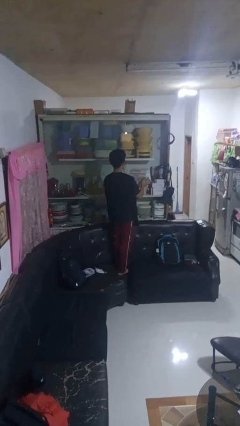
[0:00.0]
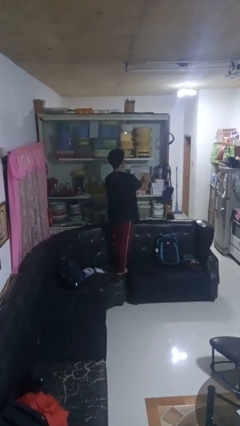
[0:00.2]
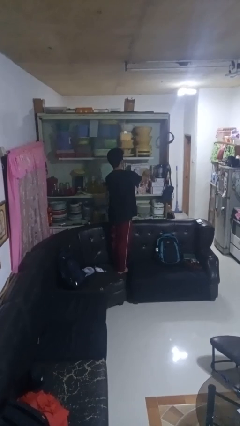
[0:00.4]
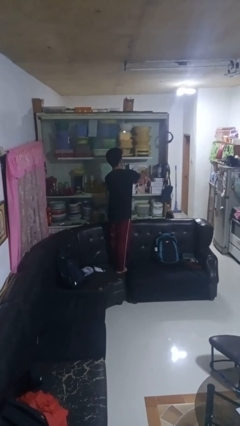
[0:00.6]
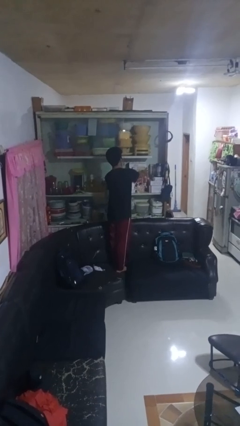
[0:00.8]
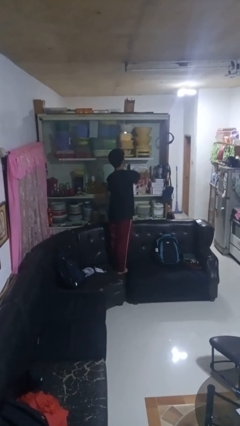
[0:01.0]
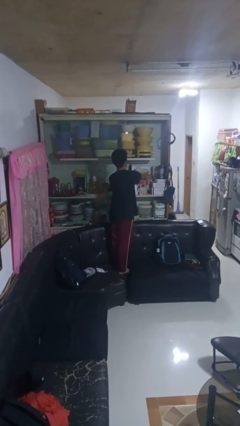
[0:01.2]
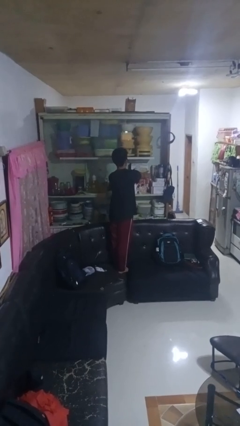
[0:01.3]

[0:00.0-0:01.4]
person puts down object into cabinet

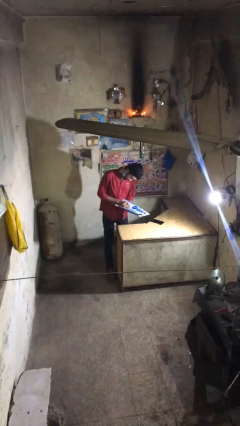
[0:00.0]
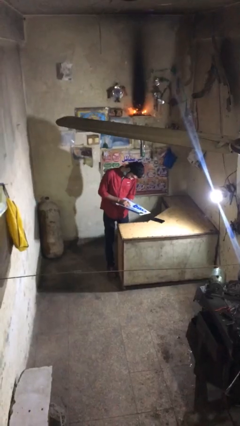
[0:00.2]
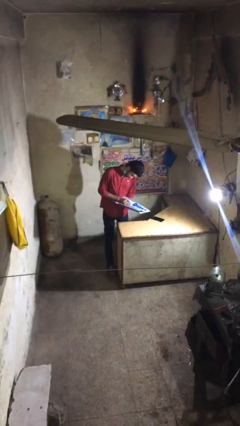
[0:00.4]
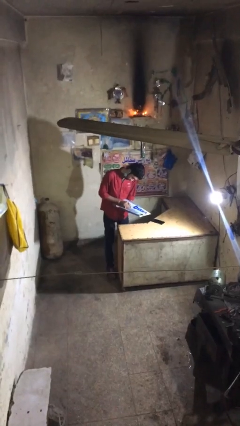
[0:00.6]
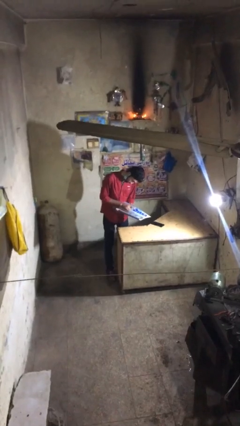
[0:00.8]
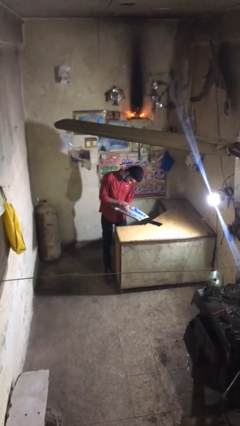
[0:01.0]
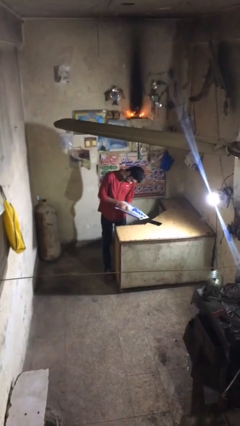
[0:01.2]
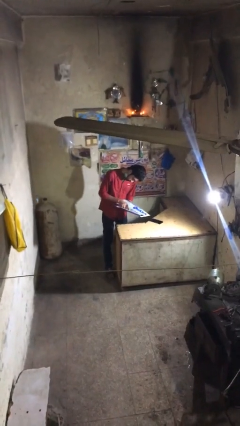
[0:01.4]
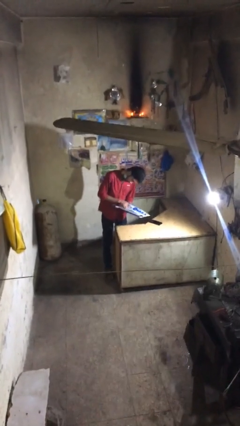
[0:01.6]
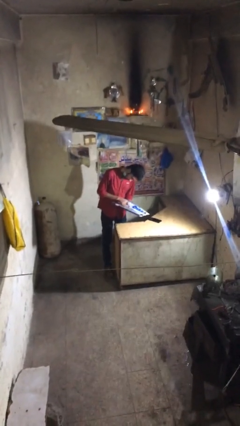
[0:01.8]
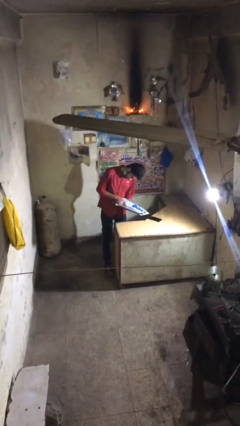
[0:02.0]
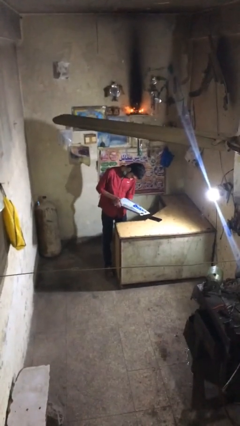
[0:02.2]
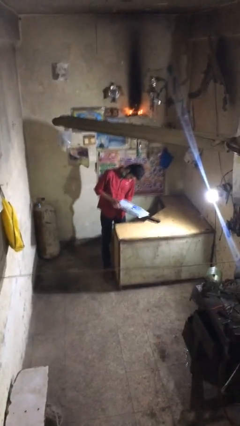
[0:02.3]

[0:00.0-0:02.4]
person reads document

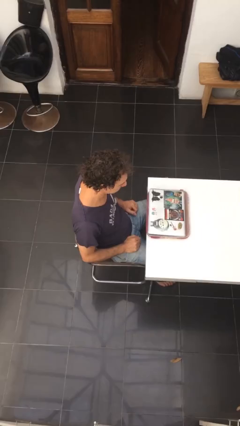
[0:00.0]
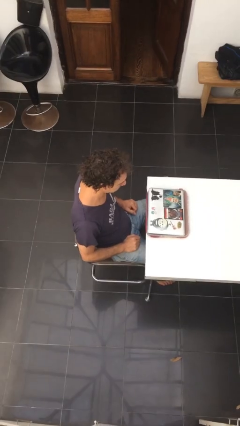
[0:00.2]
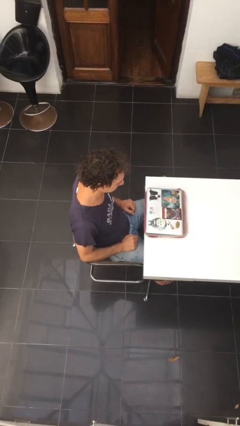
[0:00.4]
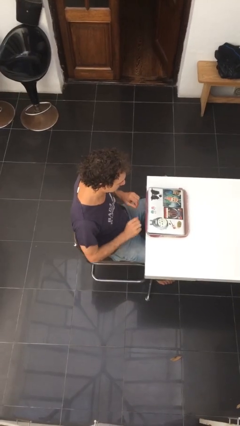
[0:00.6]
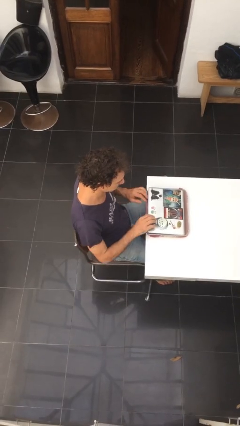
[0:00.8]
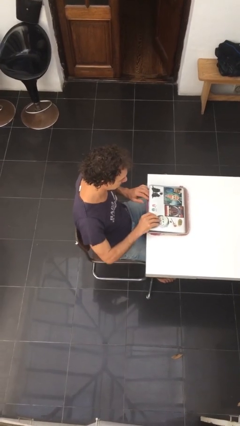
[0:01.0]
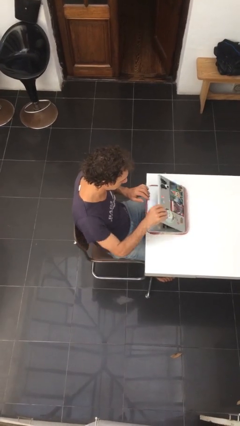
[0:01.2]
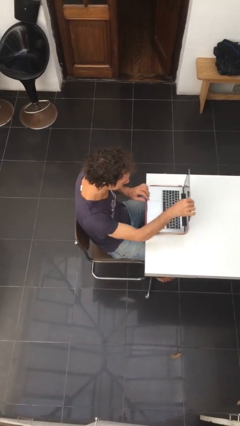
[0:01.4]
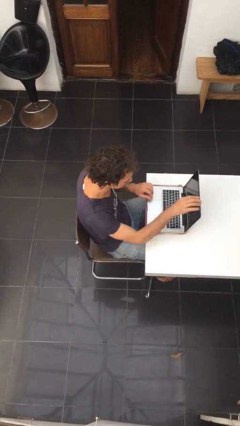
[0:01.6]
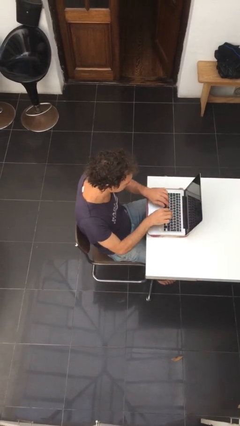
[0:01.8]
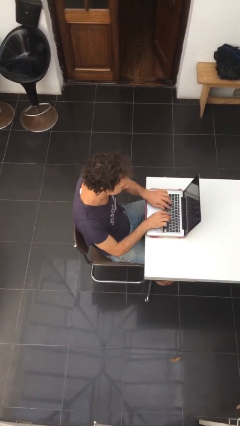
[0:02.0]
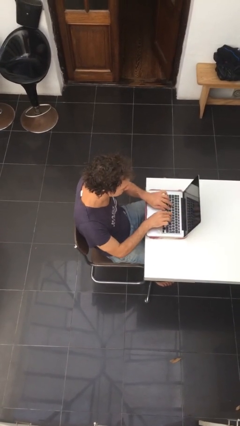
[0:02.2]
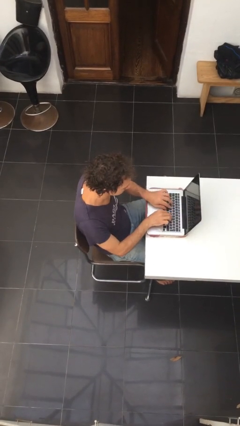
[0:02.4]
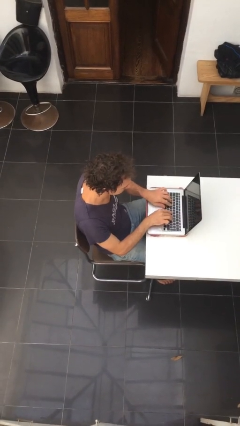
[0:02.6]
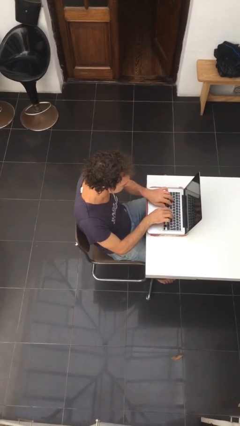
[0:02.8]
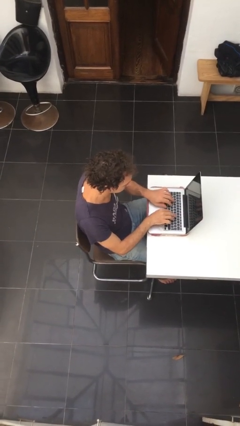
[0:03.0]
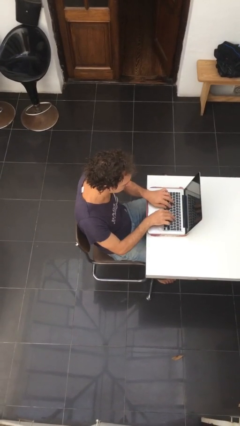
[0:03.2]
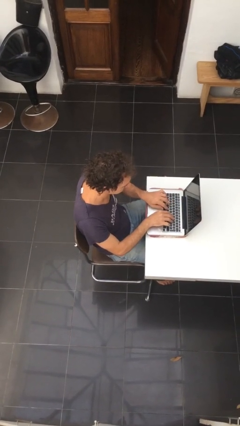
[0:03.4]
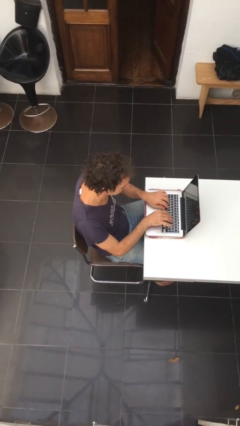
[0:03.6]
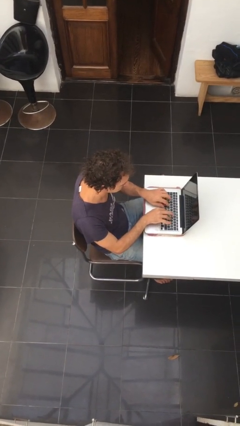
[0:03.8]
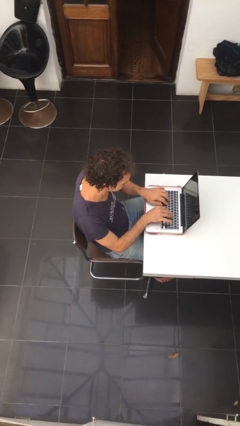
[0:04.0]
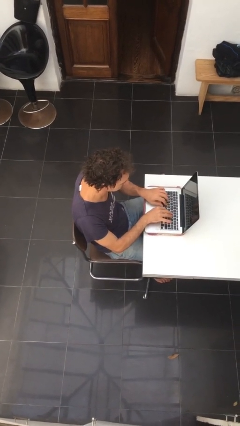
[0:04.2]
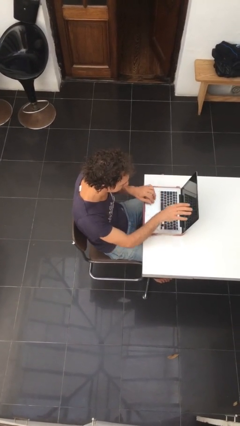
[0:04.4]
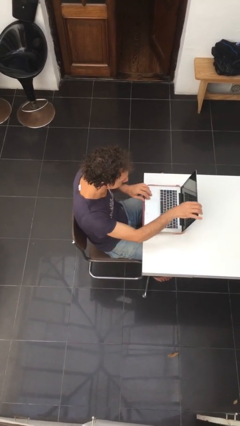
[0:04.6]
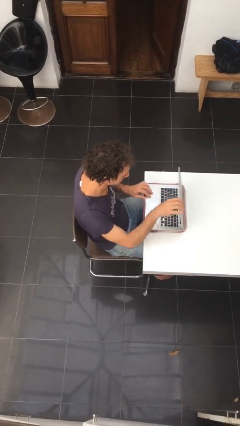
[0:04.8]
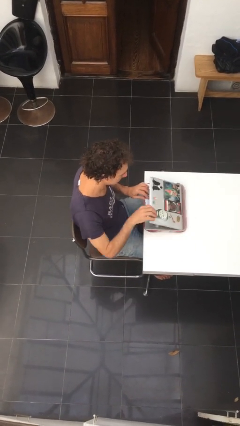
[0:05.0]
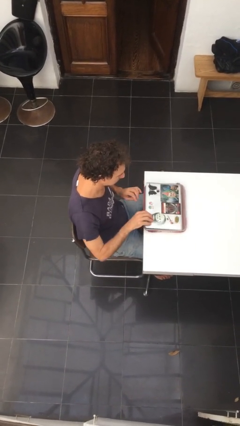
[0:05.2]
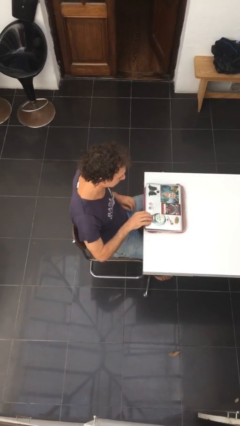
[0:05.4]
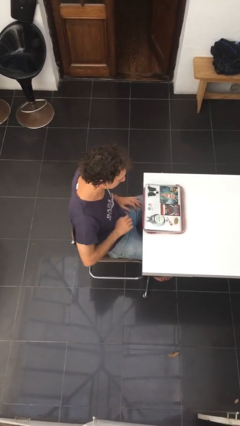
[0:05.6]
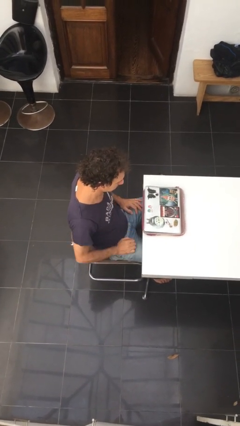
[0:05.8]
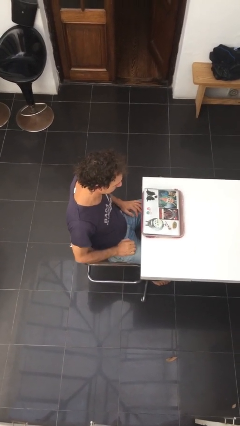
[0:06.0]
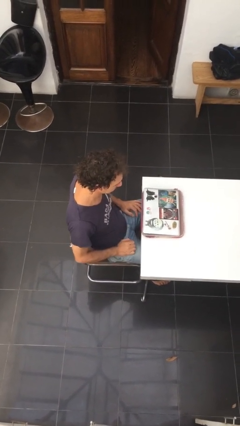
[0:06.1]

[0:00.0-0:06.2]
person interacts with laptop

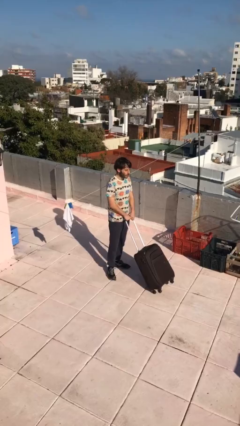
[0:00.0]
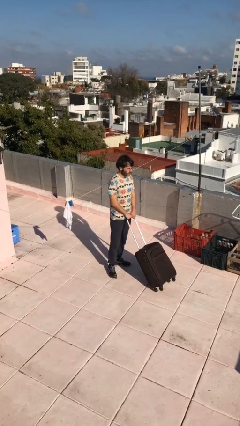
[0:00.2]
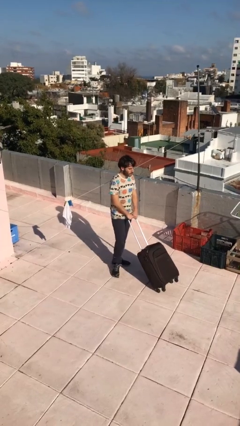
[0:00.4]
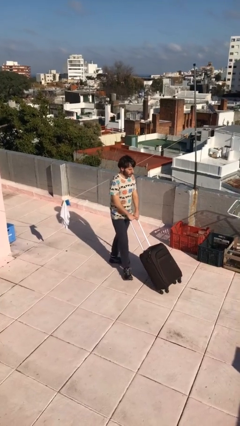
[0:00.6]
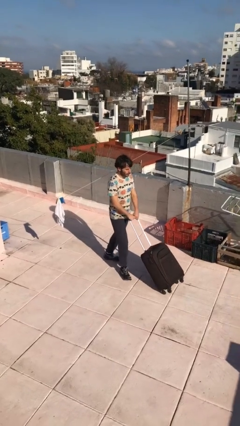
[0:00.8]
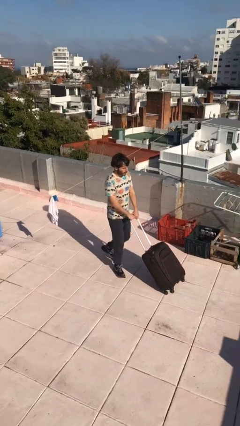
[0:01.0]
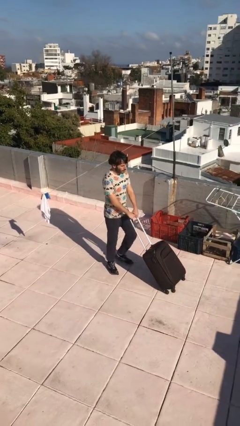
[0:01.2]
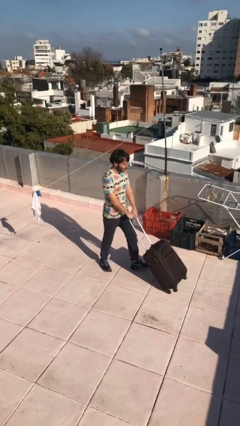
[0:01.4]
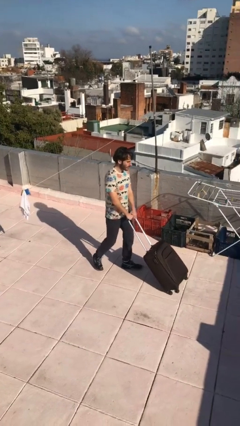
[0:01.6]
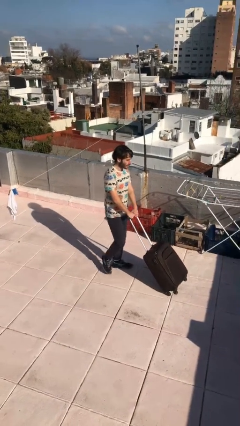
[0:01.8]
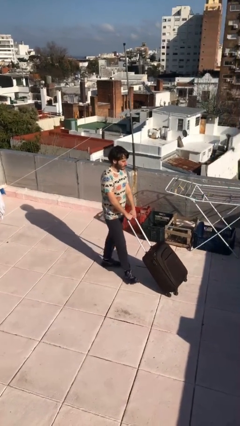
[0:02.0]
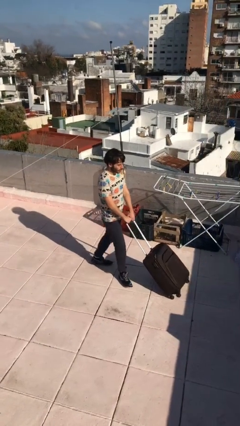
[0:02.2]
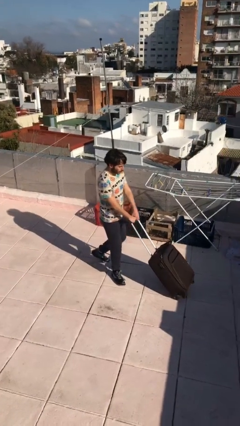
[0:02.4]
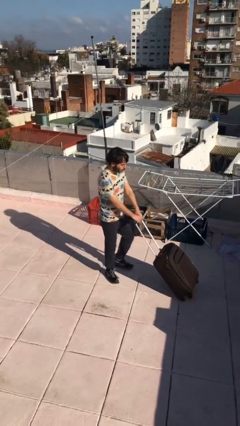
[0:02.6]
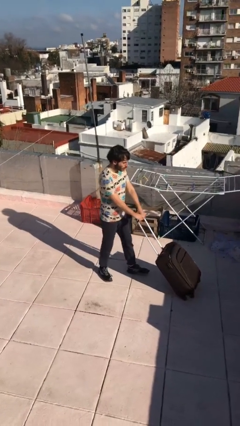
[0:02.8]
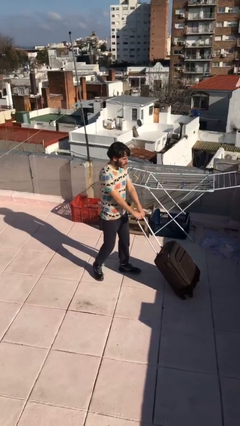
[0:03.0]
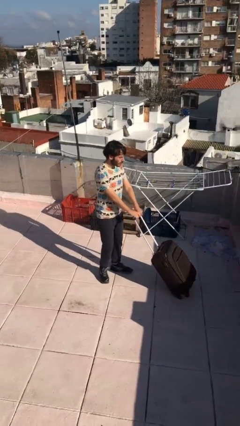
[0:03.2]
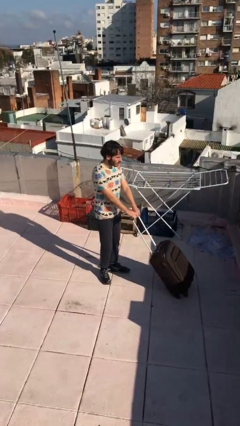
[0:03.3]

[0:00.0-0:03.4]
person pushes wheeled cart

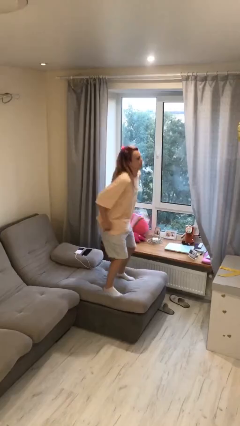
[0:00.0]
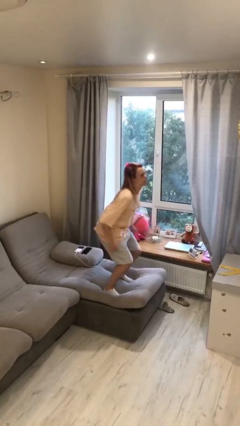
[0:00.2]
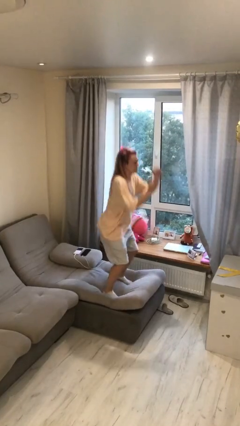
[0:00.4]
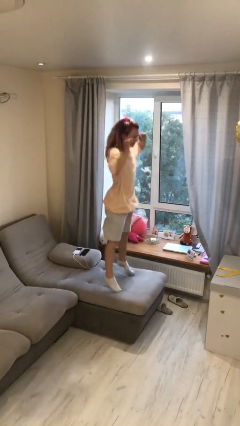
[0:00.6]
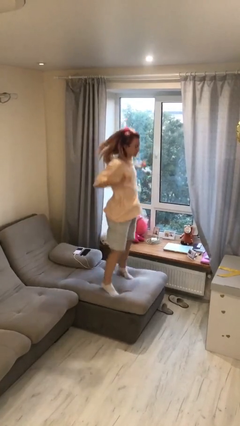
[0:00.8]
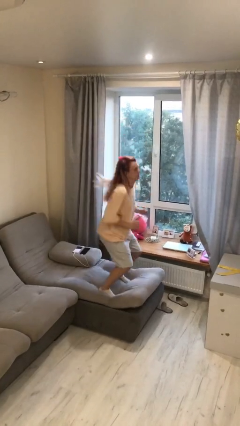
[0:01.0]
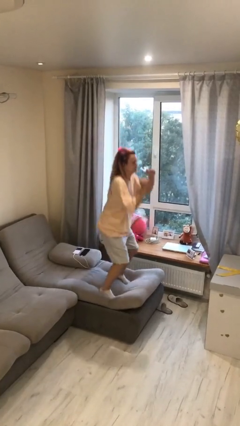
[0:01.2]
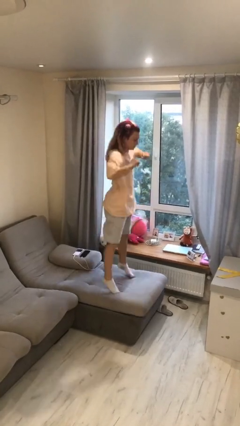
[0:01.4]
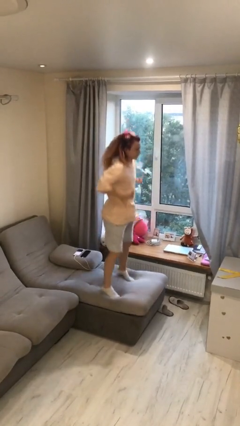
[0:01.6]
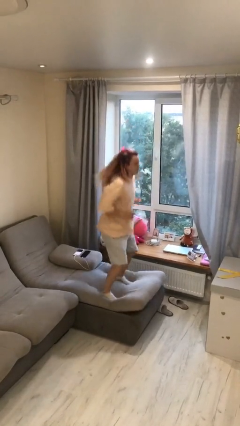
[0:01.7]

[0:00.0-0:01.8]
person jumps on couch

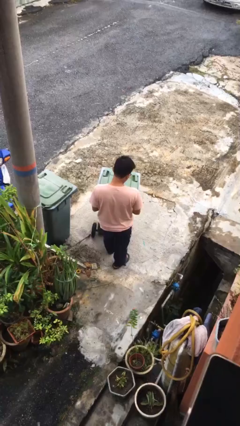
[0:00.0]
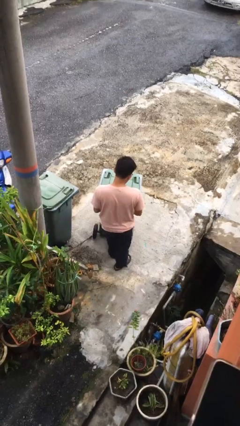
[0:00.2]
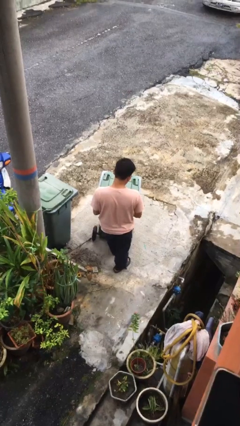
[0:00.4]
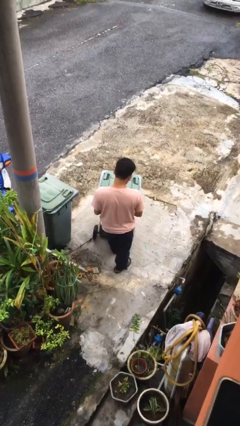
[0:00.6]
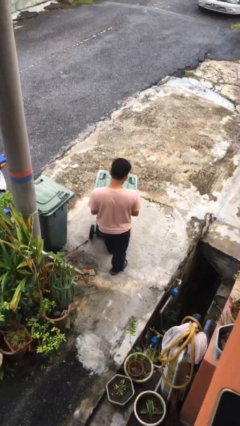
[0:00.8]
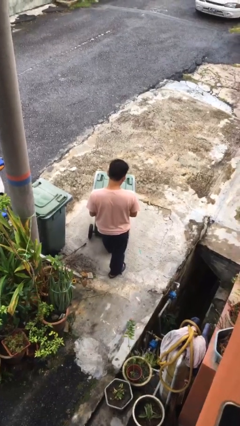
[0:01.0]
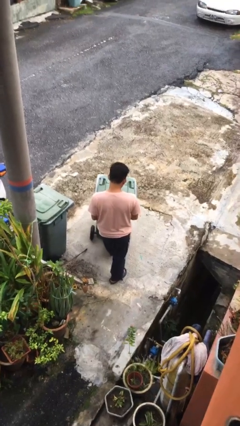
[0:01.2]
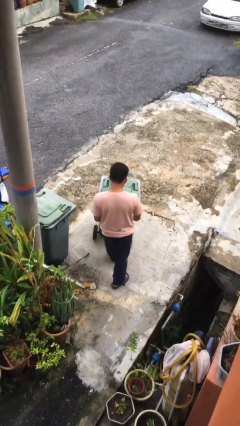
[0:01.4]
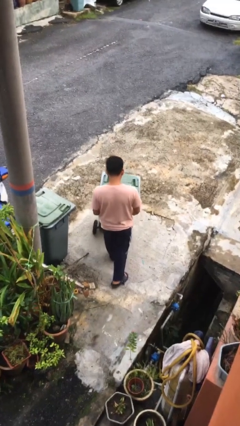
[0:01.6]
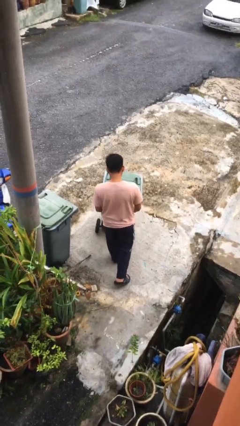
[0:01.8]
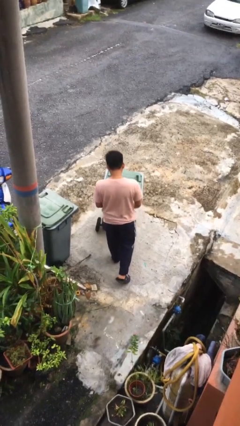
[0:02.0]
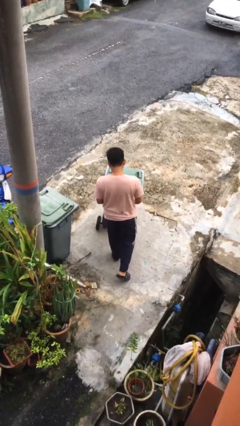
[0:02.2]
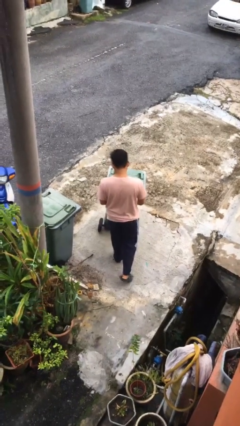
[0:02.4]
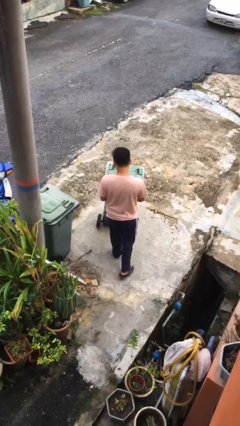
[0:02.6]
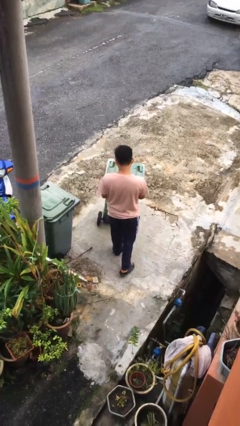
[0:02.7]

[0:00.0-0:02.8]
person pushes wheeled trashcan

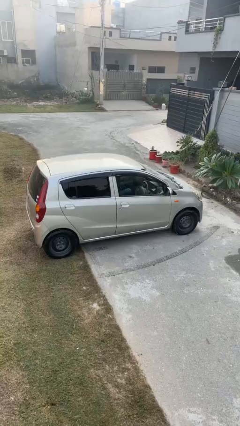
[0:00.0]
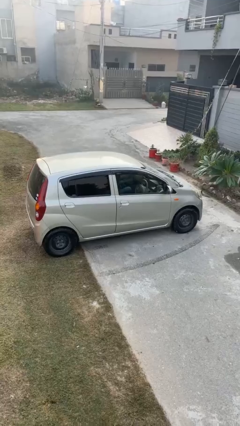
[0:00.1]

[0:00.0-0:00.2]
car drops off person
